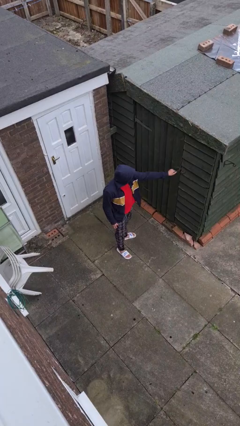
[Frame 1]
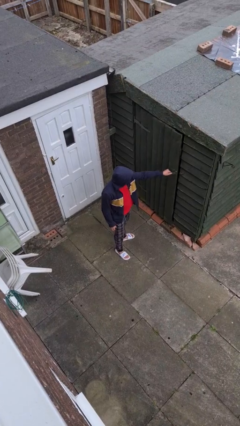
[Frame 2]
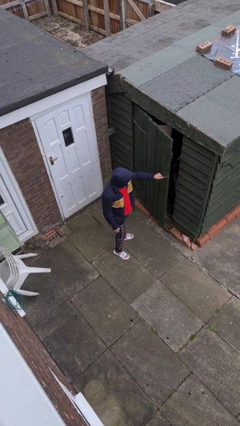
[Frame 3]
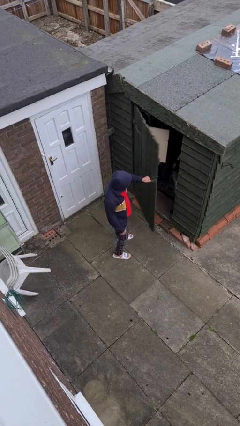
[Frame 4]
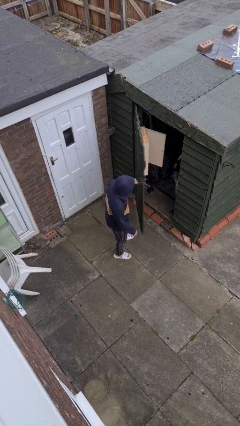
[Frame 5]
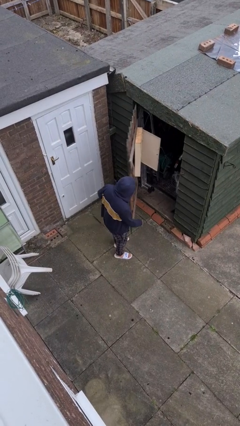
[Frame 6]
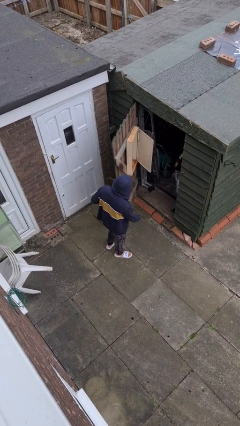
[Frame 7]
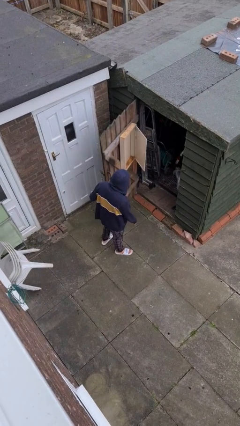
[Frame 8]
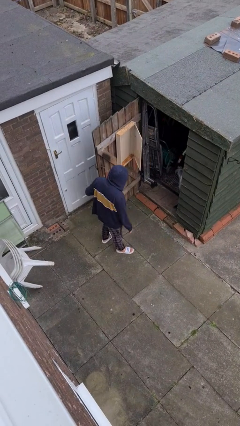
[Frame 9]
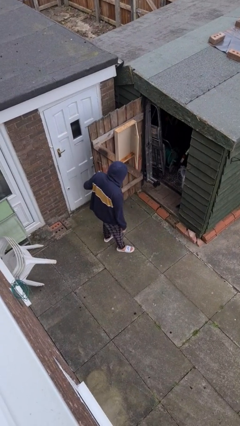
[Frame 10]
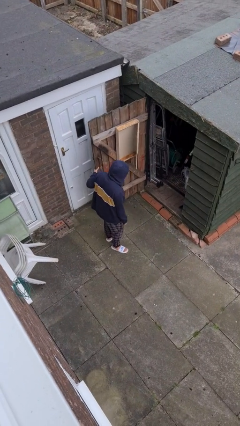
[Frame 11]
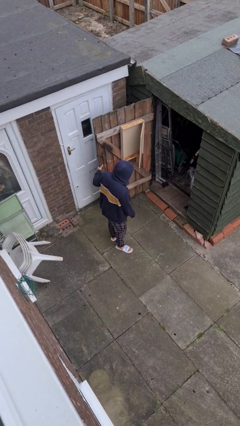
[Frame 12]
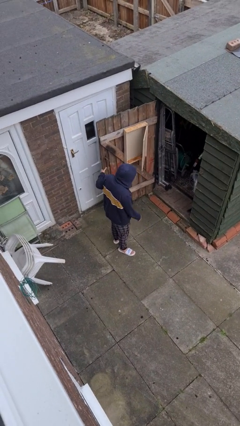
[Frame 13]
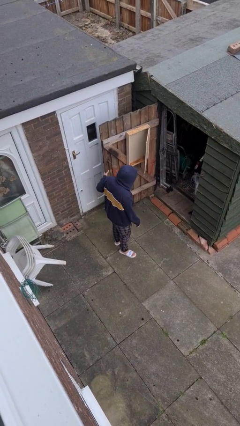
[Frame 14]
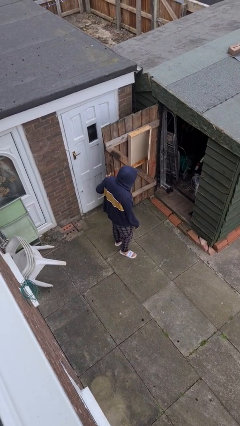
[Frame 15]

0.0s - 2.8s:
person opens facility door

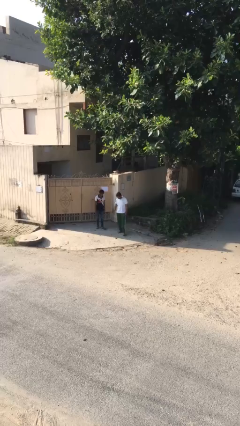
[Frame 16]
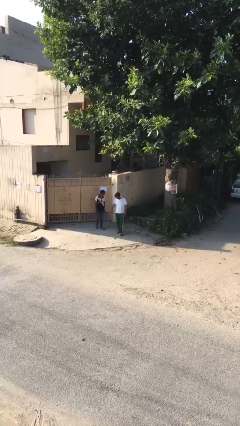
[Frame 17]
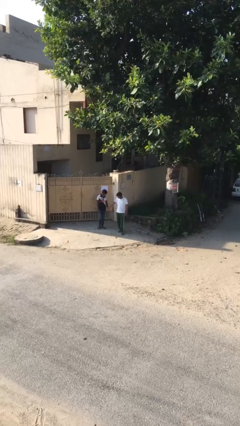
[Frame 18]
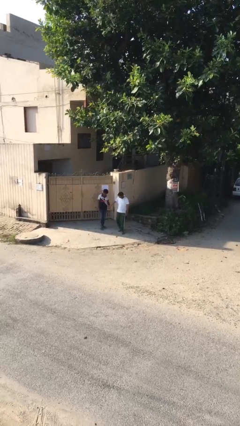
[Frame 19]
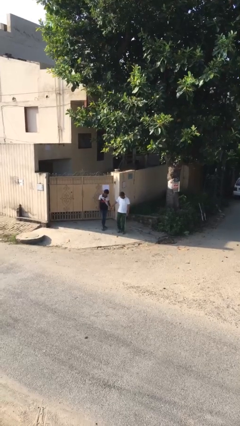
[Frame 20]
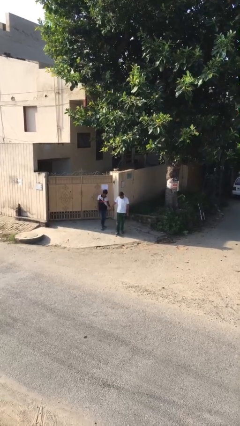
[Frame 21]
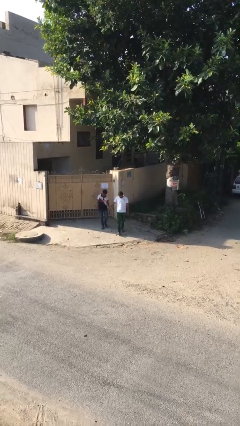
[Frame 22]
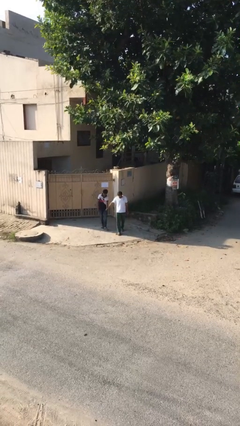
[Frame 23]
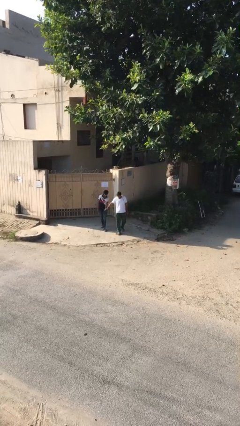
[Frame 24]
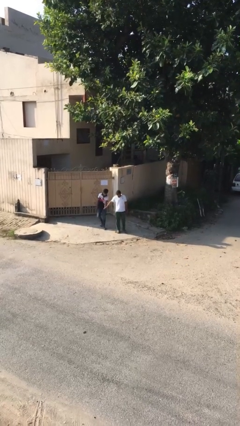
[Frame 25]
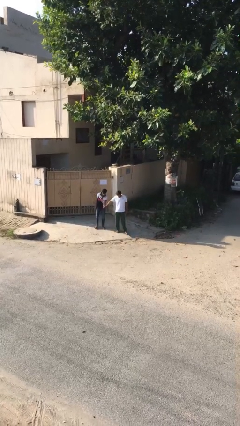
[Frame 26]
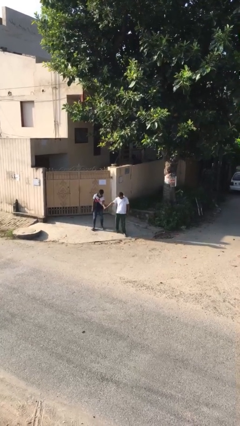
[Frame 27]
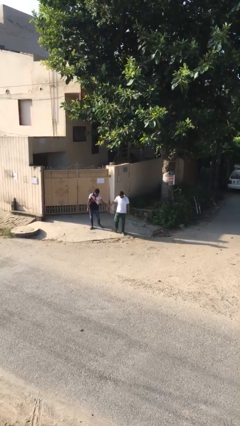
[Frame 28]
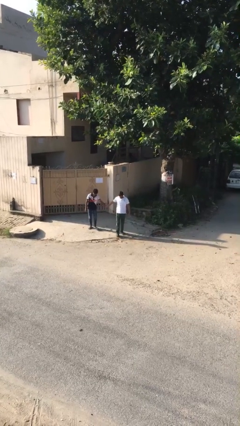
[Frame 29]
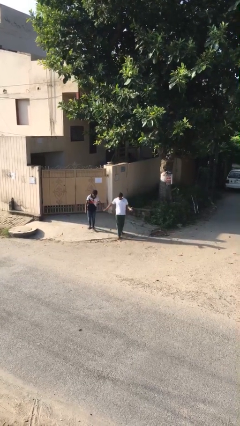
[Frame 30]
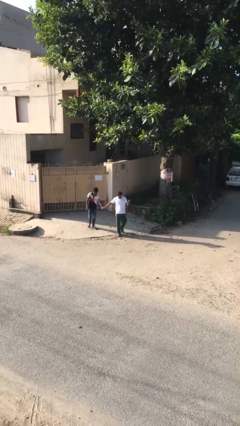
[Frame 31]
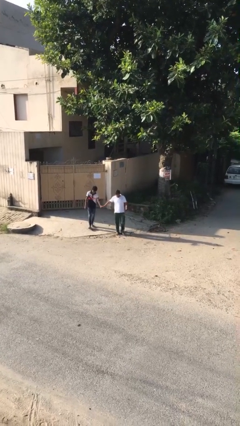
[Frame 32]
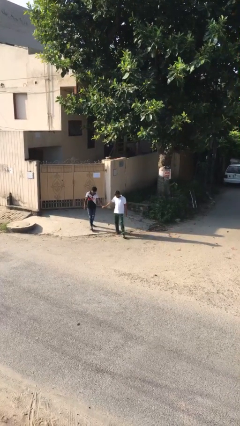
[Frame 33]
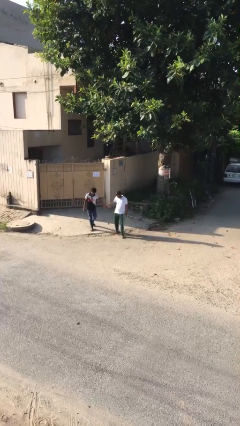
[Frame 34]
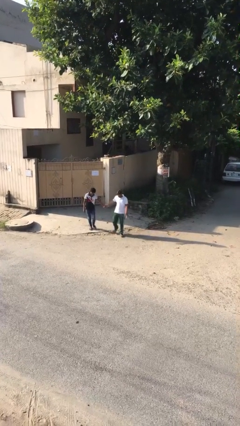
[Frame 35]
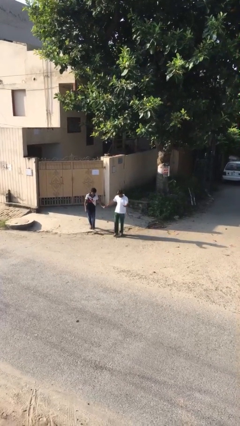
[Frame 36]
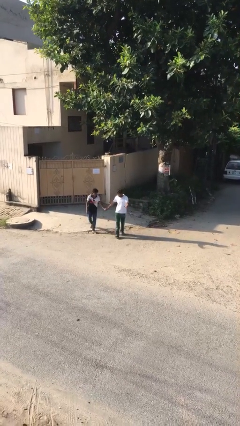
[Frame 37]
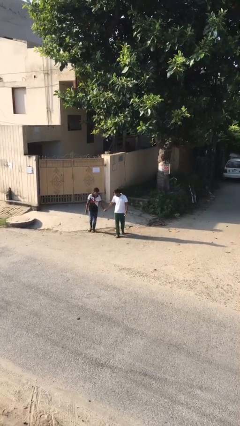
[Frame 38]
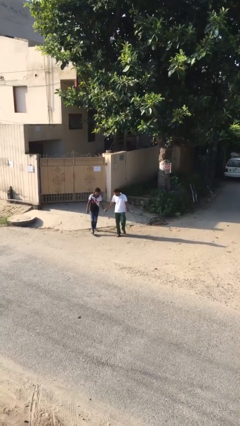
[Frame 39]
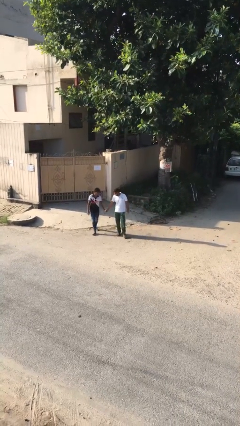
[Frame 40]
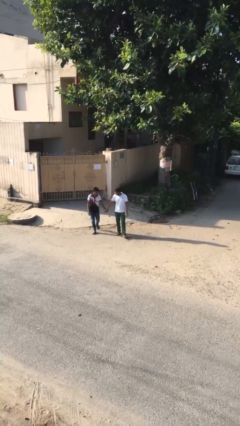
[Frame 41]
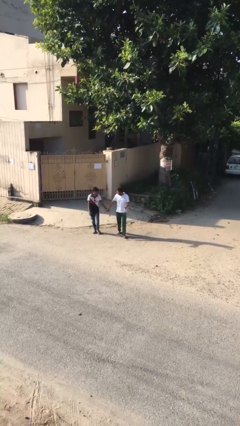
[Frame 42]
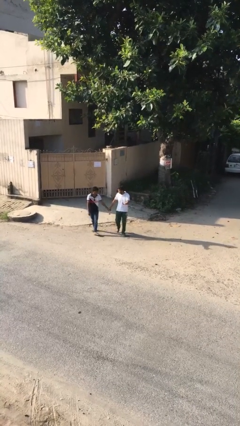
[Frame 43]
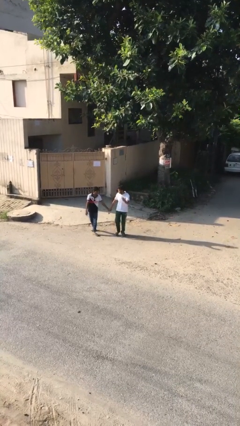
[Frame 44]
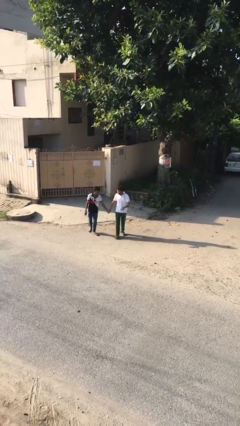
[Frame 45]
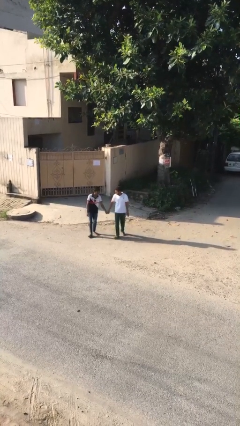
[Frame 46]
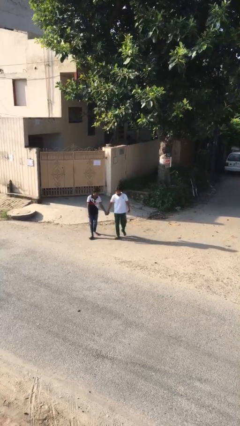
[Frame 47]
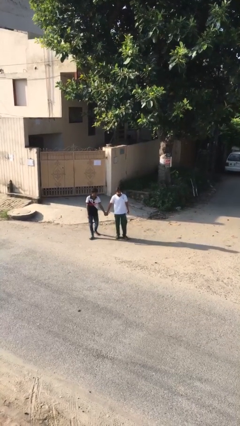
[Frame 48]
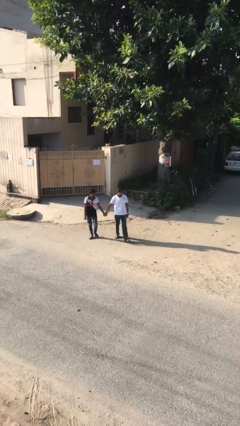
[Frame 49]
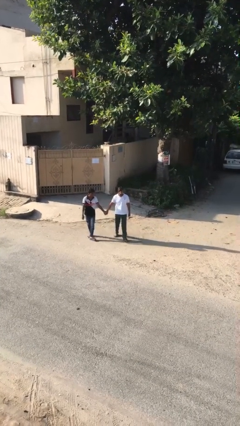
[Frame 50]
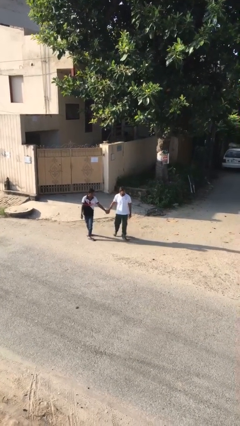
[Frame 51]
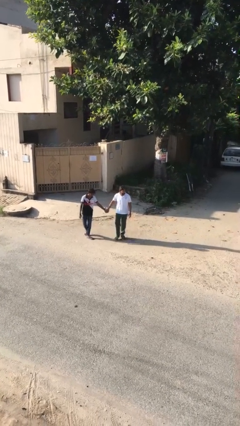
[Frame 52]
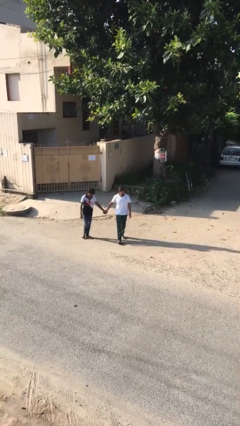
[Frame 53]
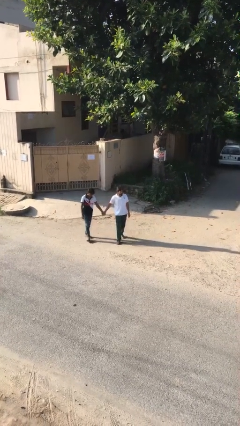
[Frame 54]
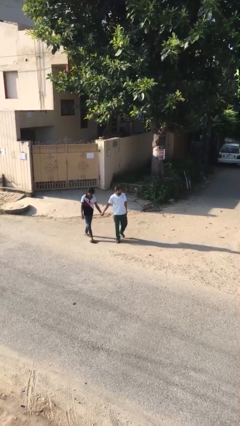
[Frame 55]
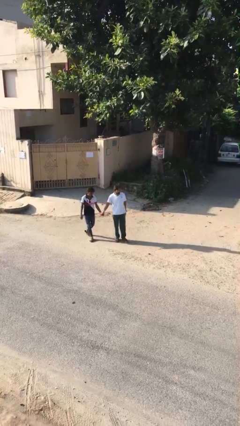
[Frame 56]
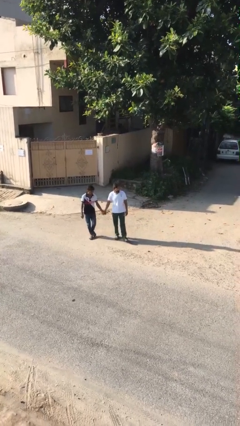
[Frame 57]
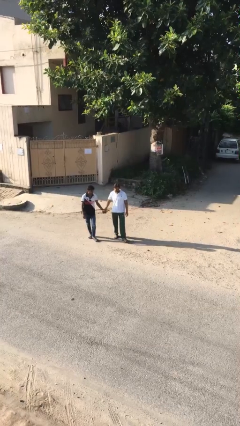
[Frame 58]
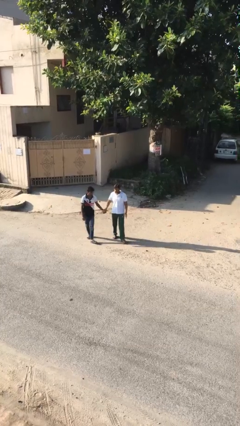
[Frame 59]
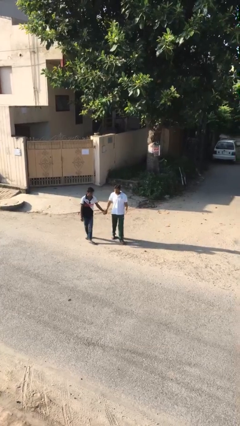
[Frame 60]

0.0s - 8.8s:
person holds hand

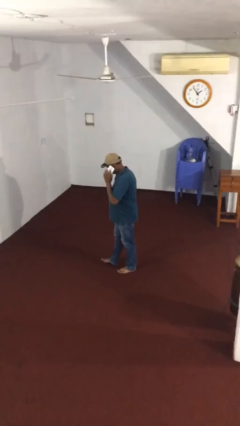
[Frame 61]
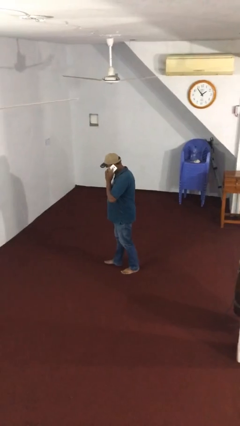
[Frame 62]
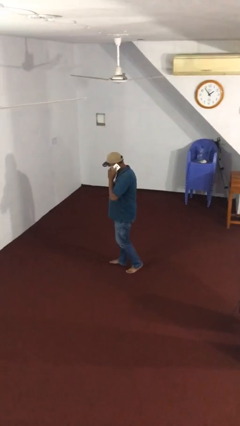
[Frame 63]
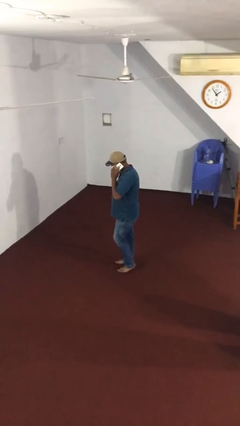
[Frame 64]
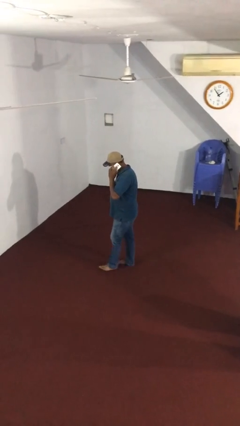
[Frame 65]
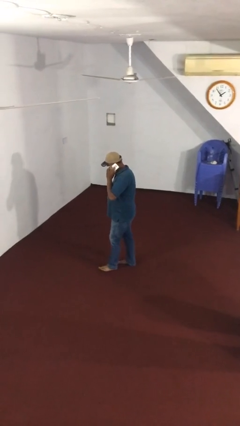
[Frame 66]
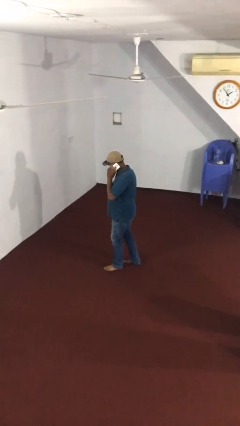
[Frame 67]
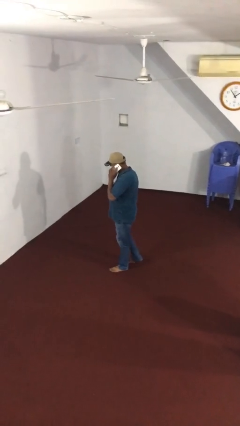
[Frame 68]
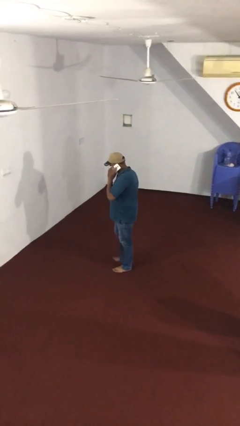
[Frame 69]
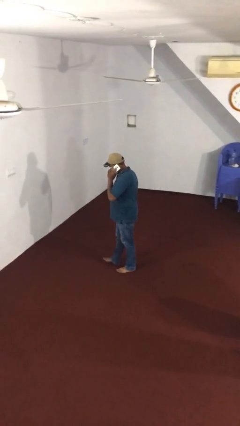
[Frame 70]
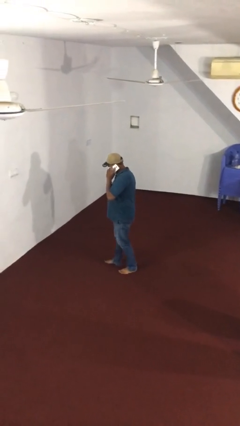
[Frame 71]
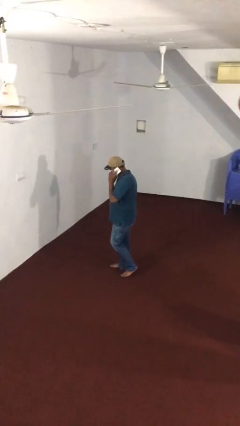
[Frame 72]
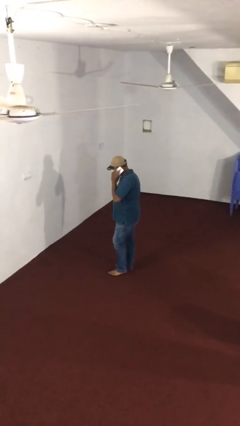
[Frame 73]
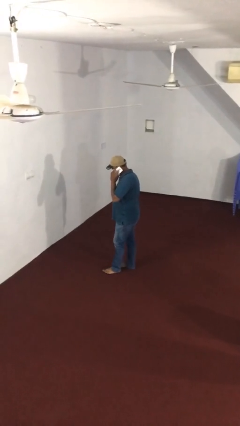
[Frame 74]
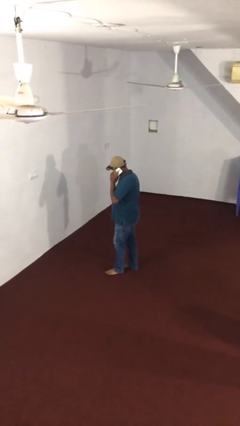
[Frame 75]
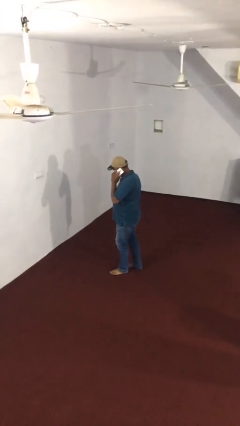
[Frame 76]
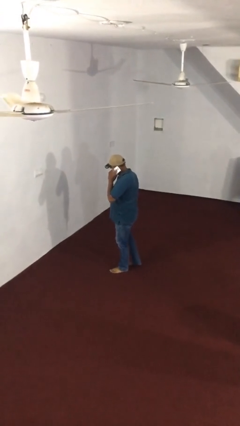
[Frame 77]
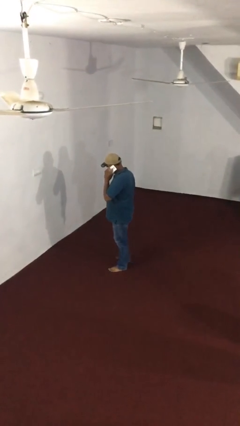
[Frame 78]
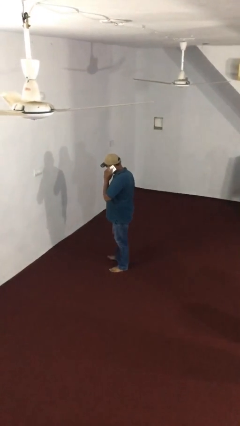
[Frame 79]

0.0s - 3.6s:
person talks on phone

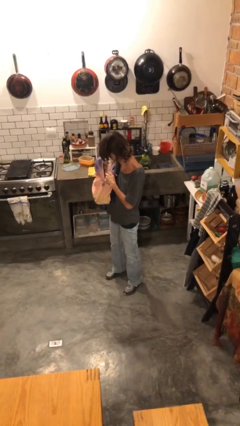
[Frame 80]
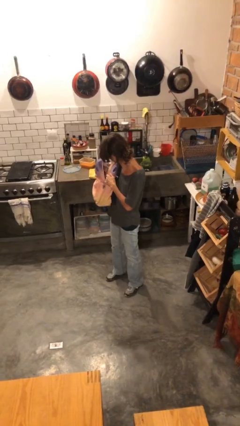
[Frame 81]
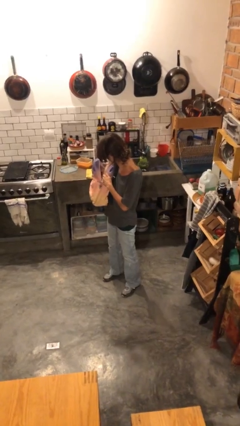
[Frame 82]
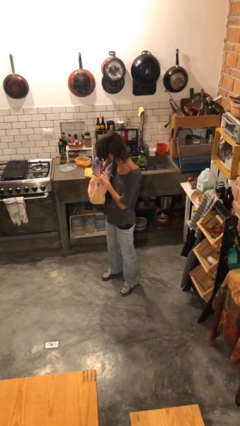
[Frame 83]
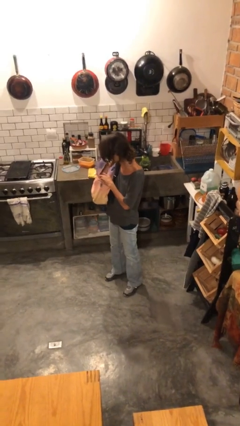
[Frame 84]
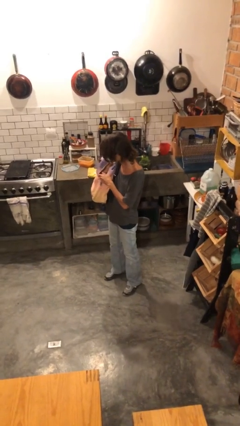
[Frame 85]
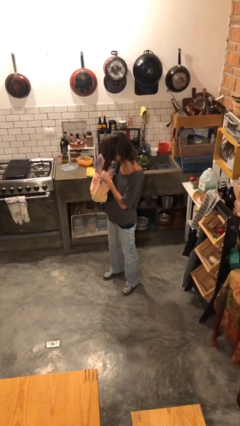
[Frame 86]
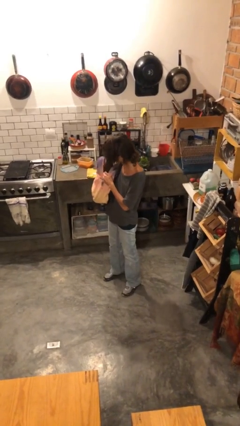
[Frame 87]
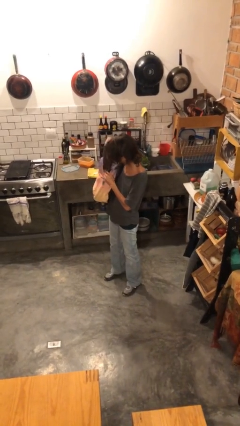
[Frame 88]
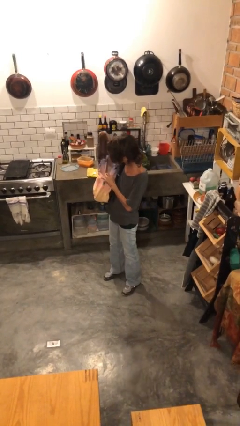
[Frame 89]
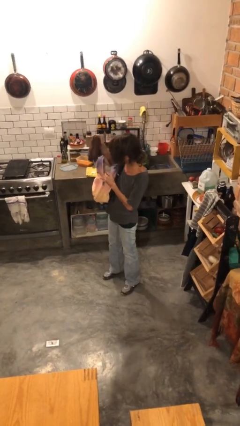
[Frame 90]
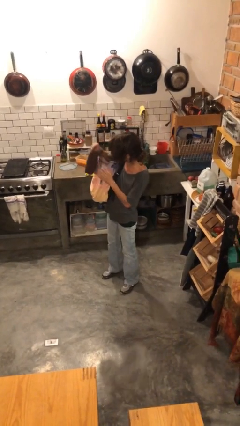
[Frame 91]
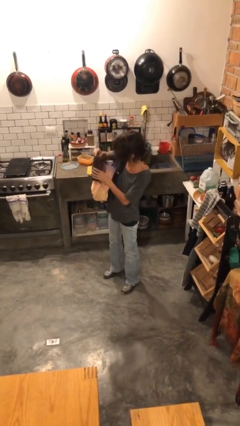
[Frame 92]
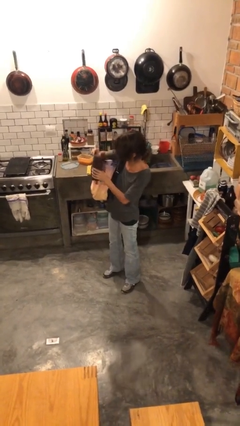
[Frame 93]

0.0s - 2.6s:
person takes object from backpack

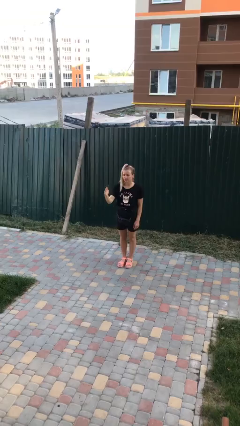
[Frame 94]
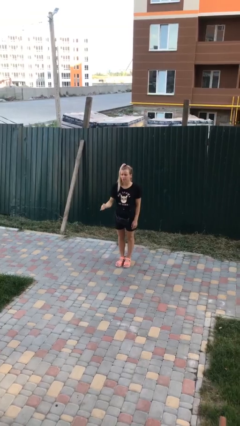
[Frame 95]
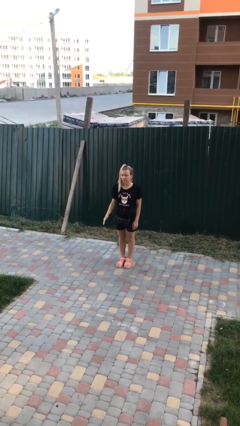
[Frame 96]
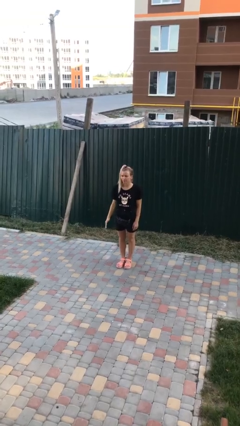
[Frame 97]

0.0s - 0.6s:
person gestures lower hand
